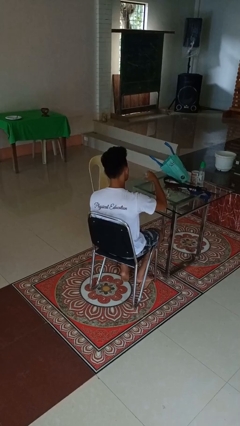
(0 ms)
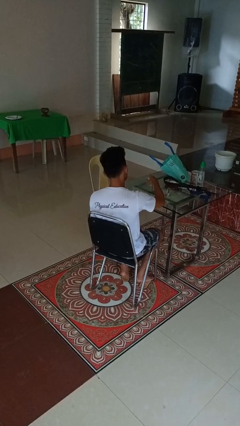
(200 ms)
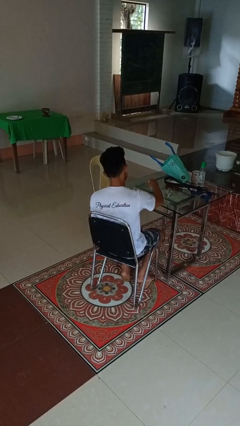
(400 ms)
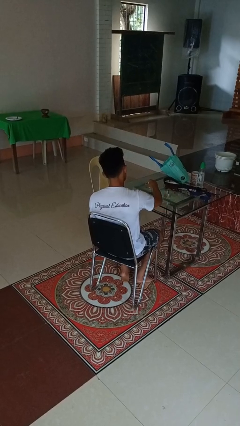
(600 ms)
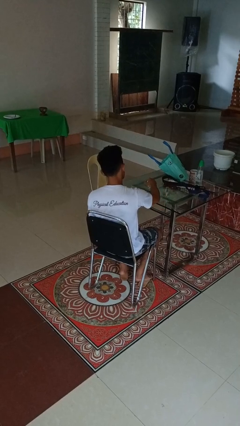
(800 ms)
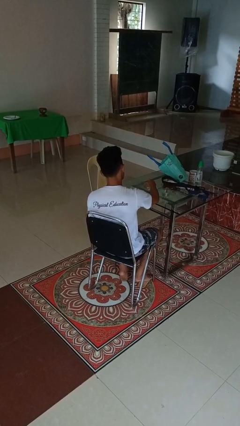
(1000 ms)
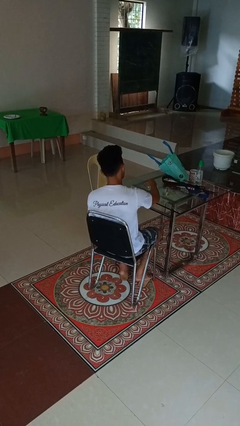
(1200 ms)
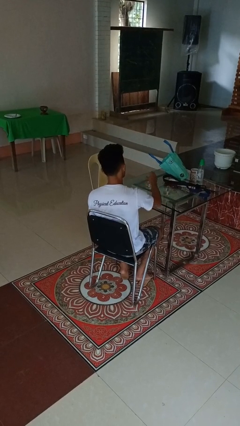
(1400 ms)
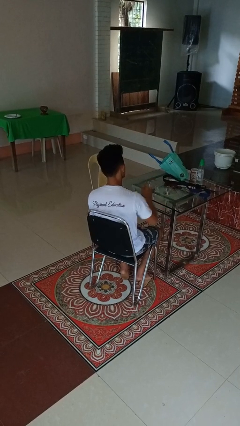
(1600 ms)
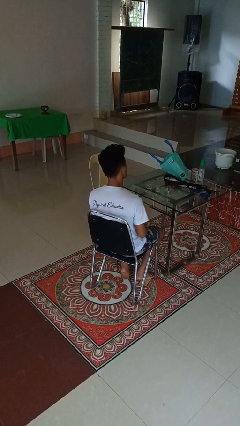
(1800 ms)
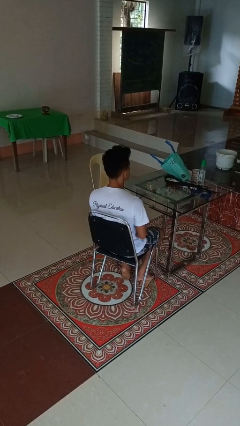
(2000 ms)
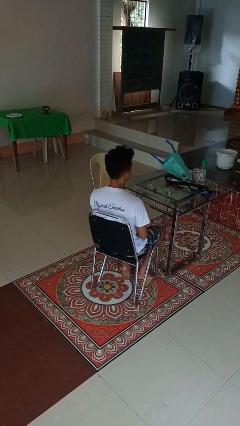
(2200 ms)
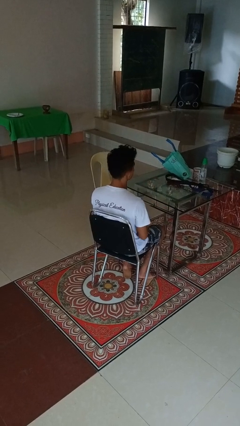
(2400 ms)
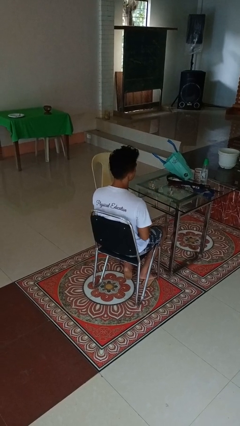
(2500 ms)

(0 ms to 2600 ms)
person puts down object on table

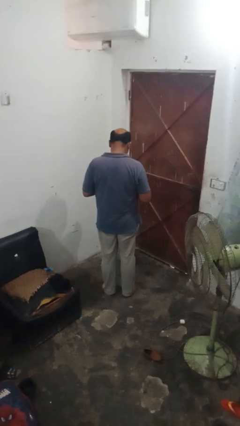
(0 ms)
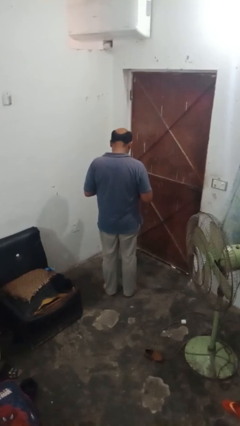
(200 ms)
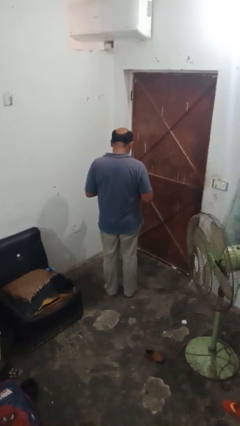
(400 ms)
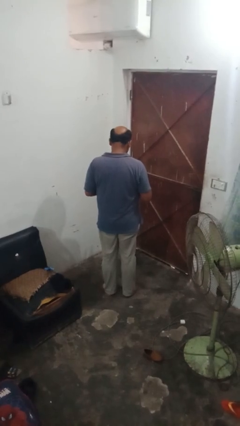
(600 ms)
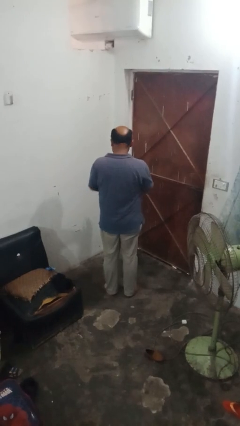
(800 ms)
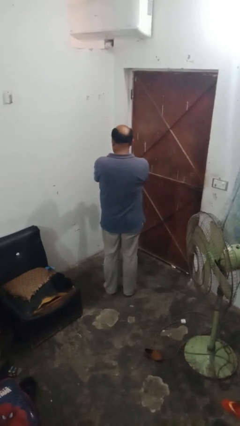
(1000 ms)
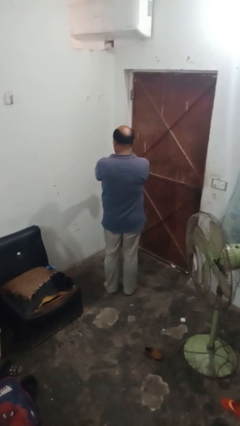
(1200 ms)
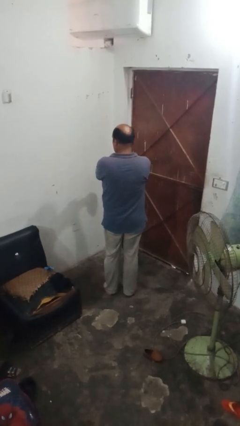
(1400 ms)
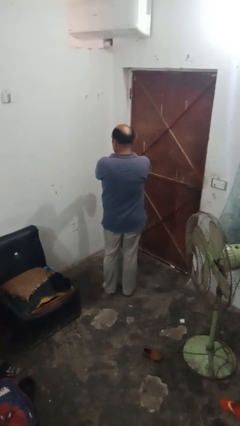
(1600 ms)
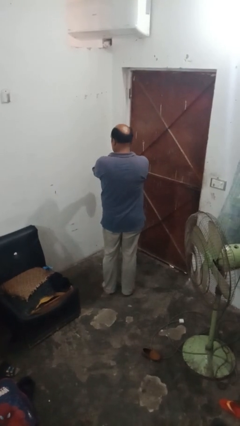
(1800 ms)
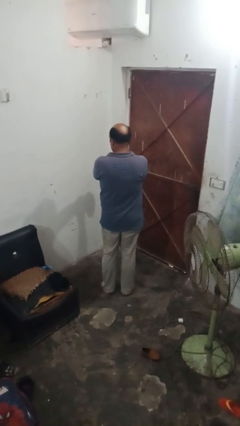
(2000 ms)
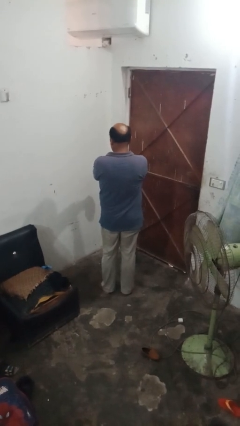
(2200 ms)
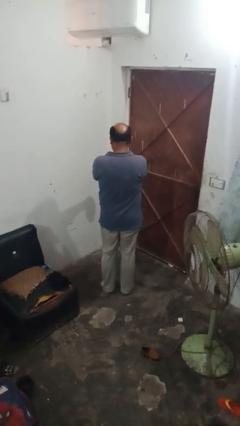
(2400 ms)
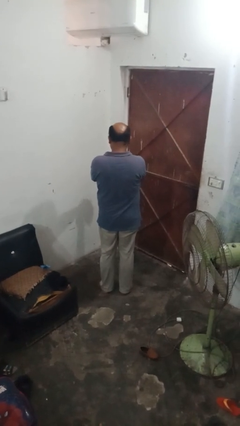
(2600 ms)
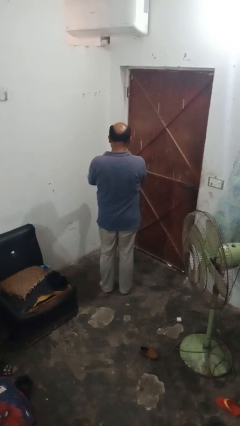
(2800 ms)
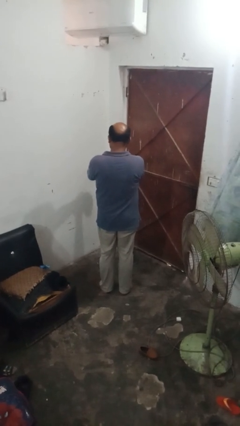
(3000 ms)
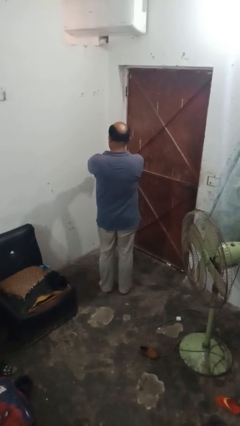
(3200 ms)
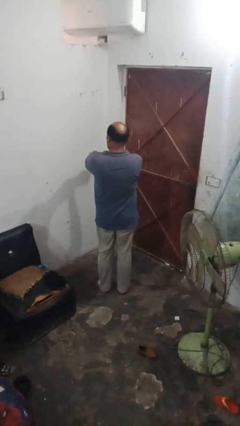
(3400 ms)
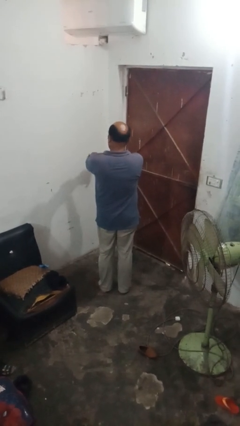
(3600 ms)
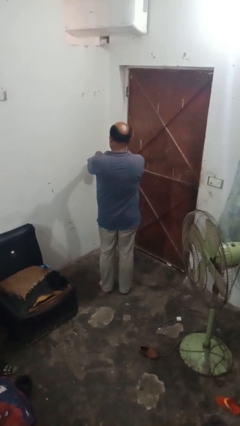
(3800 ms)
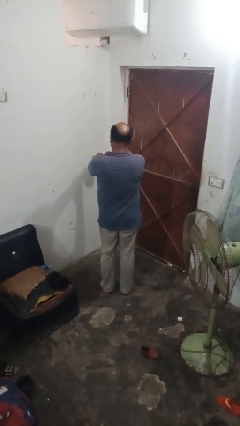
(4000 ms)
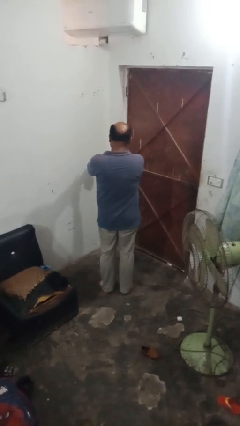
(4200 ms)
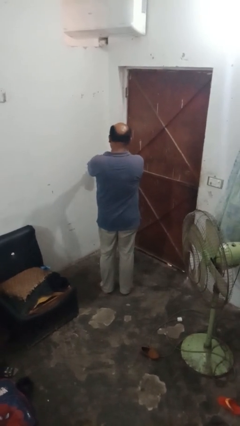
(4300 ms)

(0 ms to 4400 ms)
person applies sunscreen

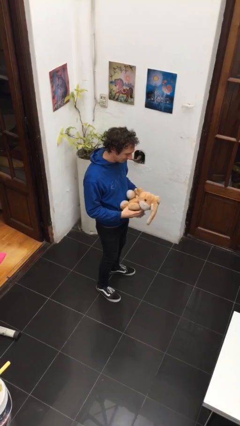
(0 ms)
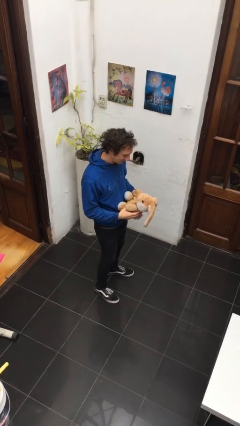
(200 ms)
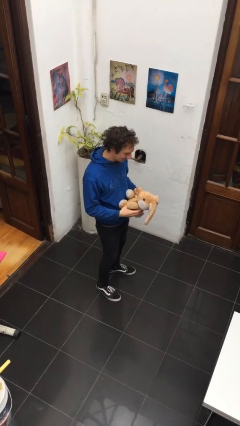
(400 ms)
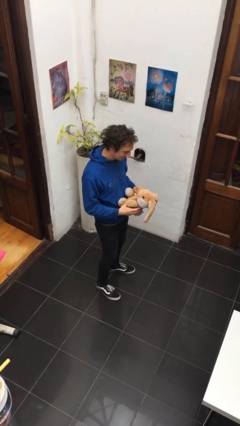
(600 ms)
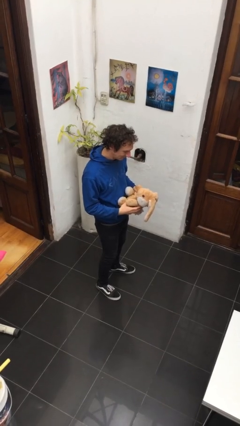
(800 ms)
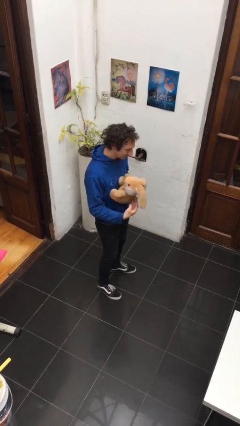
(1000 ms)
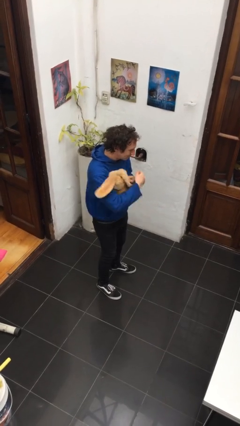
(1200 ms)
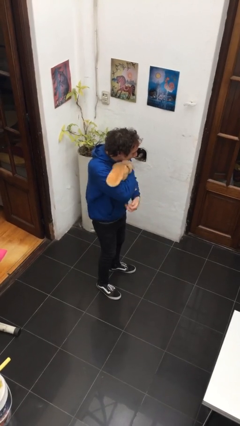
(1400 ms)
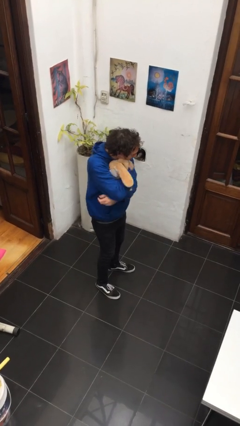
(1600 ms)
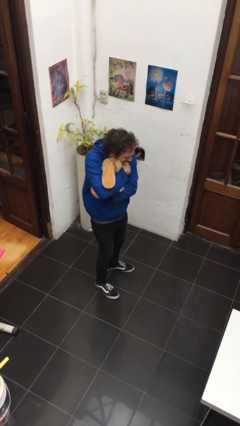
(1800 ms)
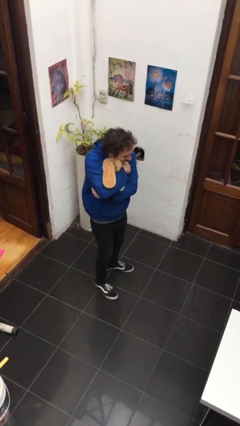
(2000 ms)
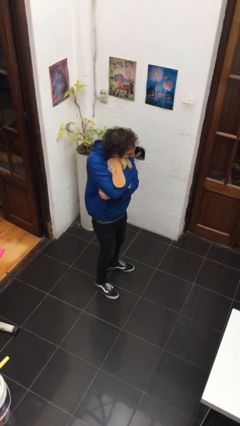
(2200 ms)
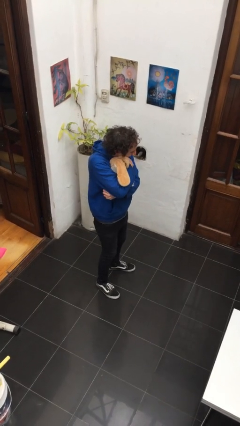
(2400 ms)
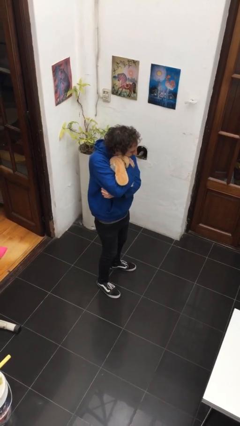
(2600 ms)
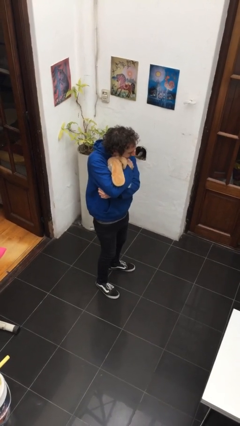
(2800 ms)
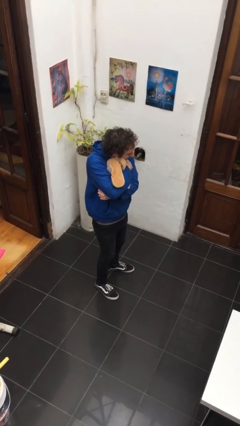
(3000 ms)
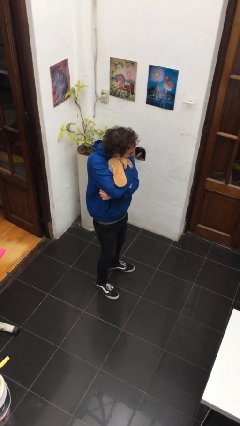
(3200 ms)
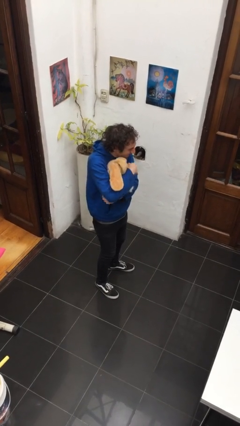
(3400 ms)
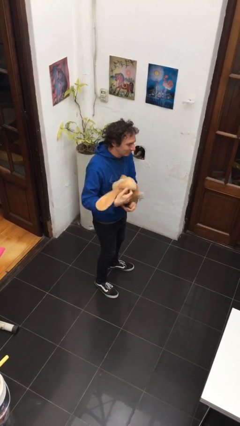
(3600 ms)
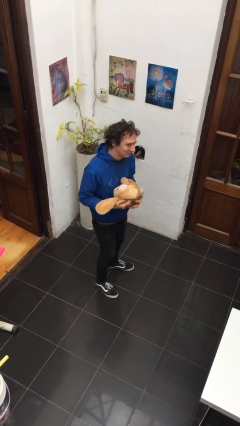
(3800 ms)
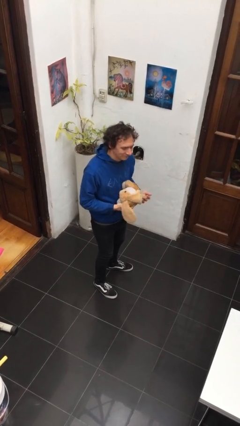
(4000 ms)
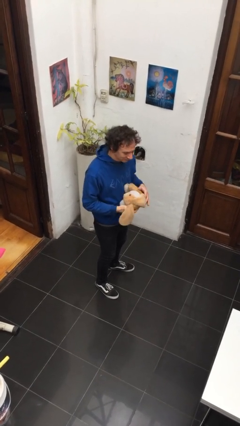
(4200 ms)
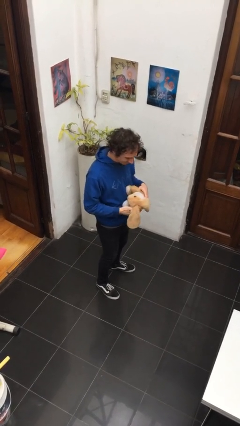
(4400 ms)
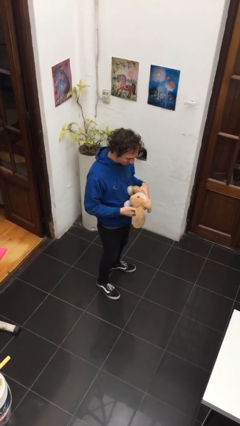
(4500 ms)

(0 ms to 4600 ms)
person hugs stuffed animal

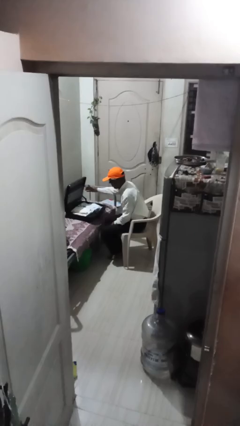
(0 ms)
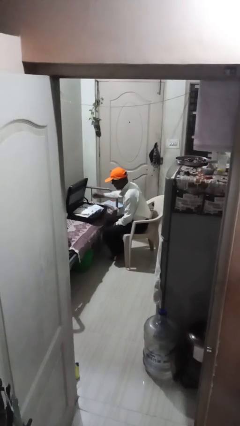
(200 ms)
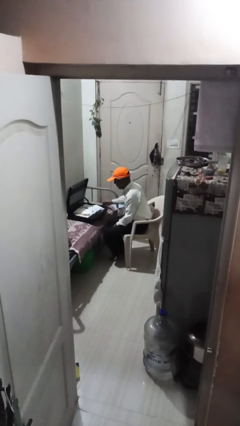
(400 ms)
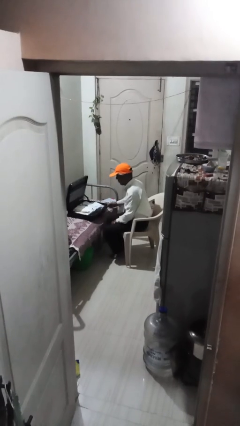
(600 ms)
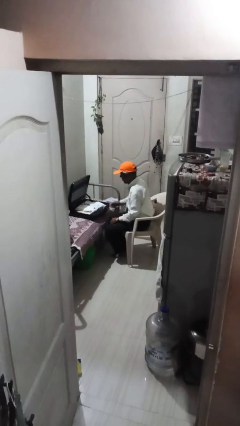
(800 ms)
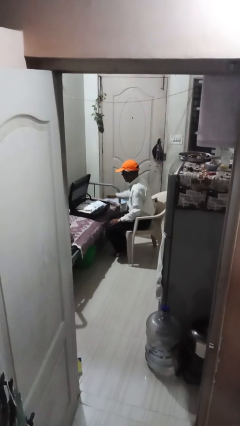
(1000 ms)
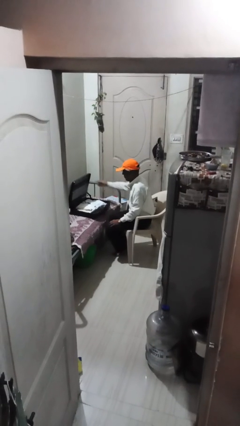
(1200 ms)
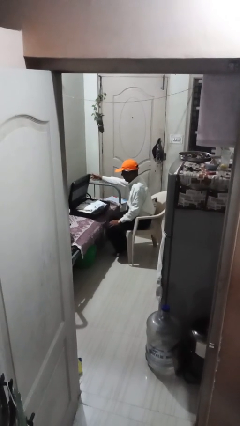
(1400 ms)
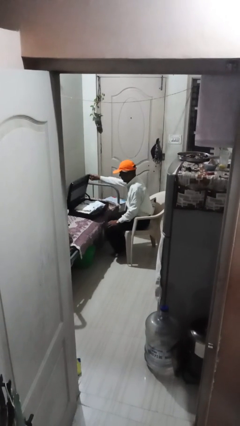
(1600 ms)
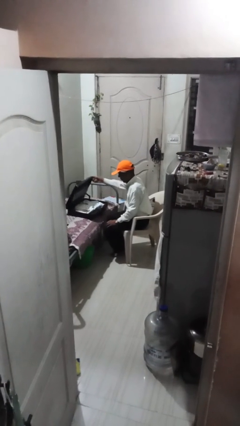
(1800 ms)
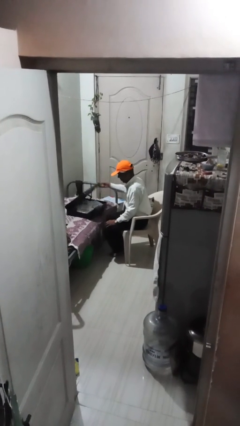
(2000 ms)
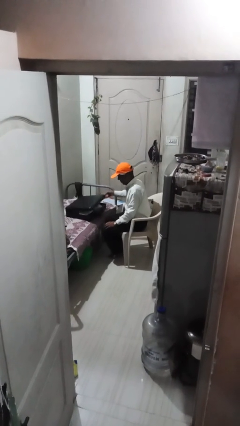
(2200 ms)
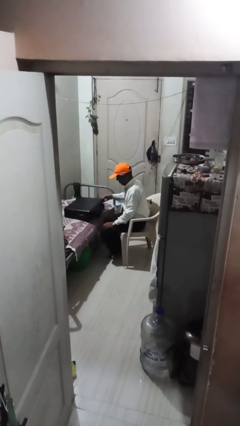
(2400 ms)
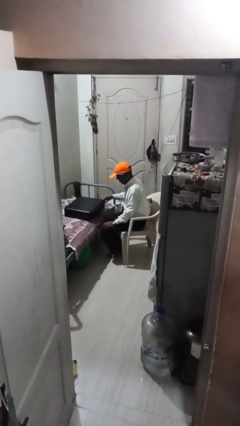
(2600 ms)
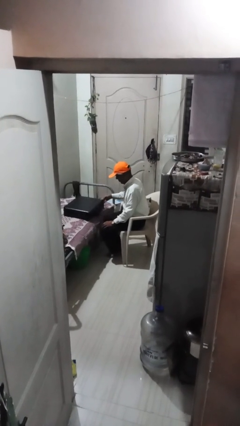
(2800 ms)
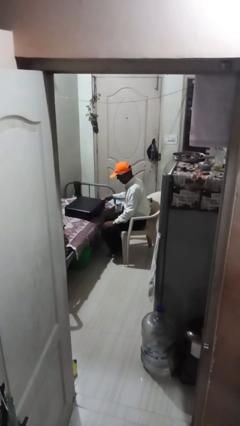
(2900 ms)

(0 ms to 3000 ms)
person closes suitcase

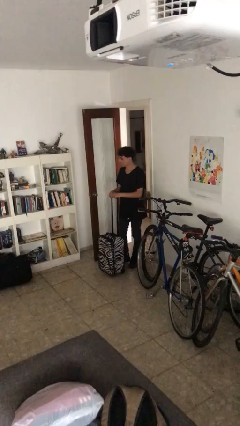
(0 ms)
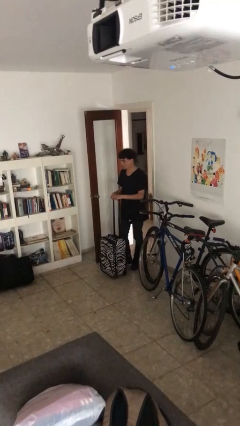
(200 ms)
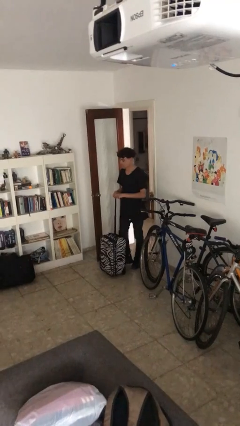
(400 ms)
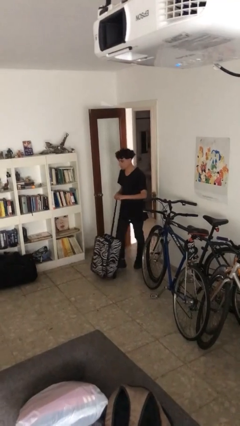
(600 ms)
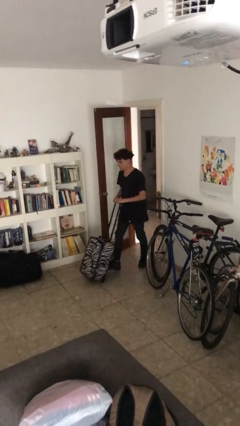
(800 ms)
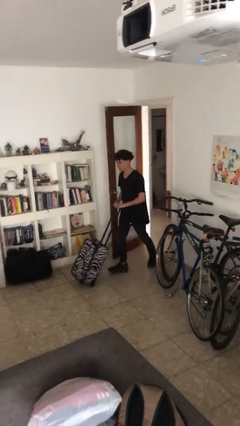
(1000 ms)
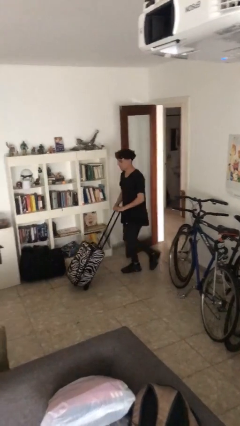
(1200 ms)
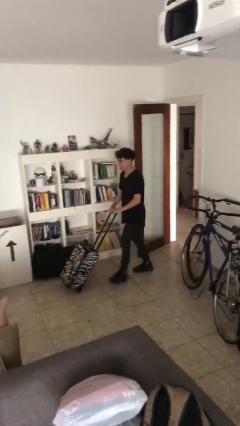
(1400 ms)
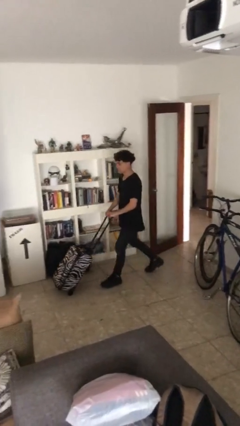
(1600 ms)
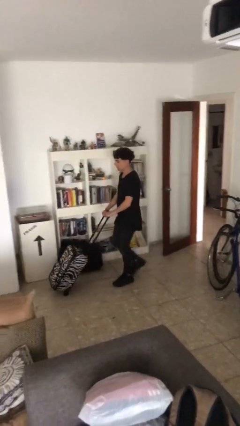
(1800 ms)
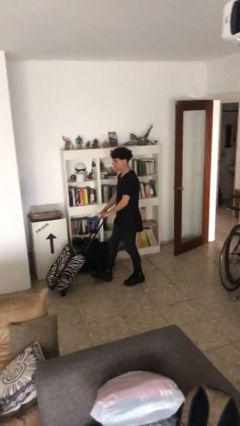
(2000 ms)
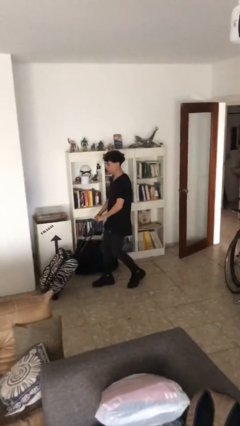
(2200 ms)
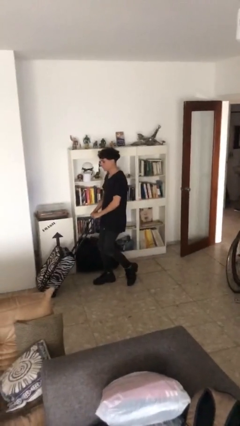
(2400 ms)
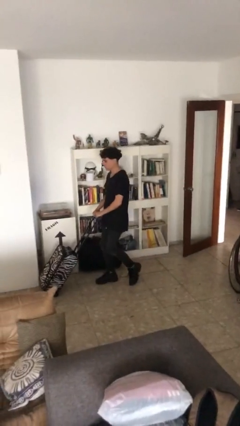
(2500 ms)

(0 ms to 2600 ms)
person pushes wheeled cart

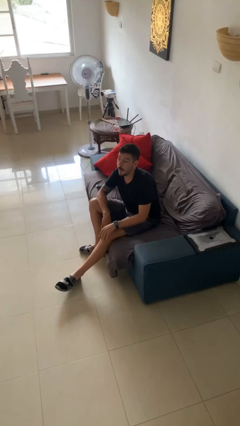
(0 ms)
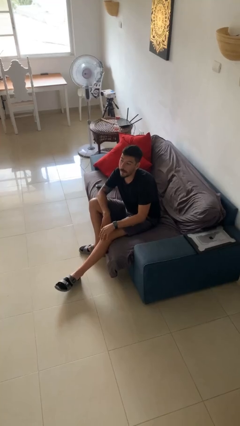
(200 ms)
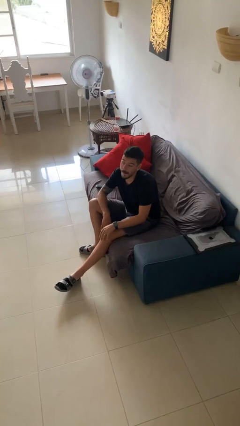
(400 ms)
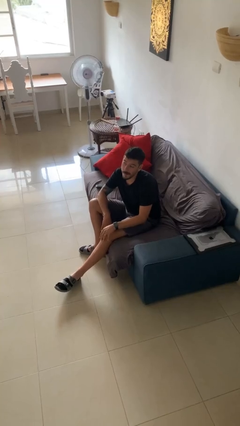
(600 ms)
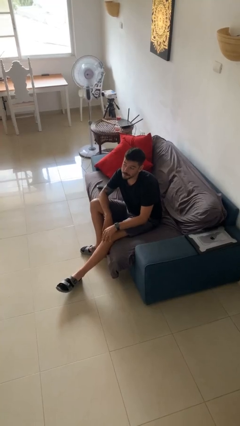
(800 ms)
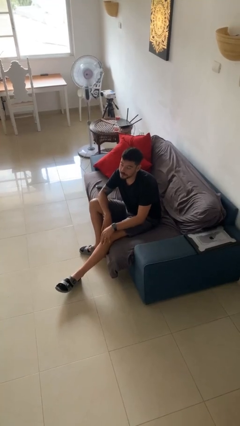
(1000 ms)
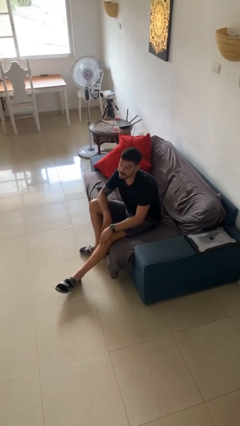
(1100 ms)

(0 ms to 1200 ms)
person gestures lower hand
